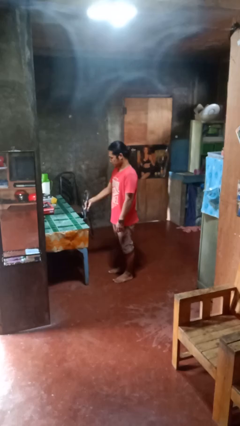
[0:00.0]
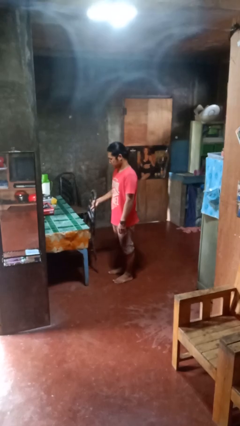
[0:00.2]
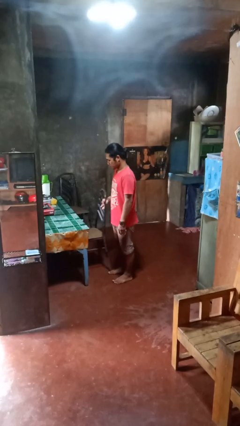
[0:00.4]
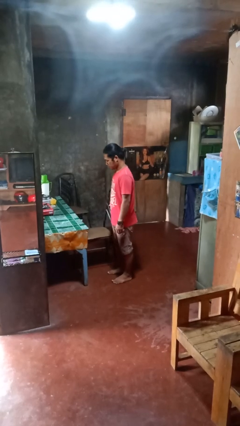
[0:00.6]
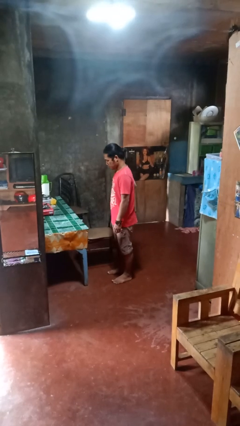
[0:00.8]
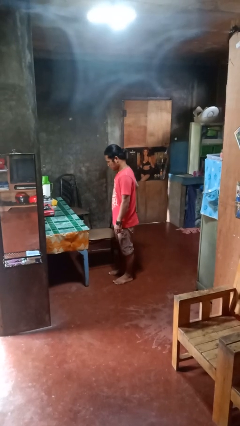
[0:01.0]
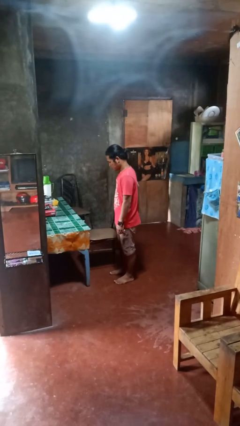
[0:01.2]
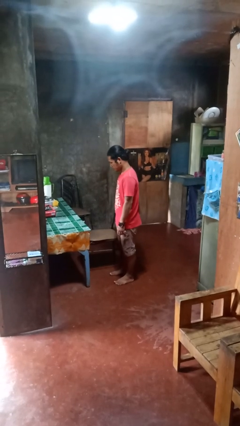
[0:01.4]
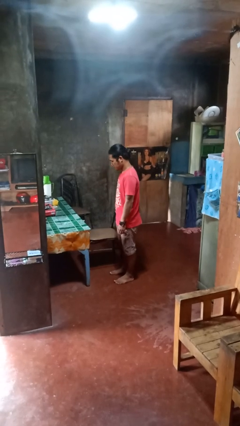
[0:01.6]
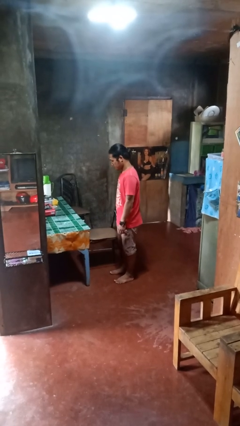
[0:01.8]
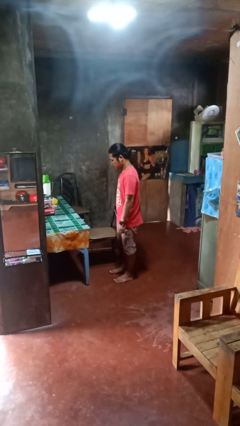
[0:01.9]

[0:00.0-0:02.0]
person pulls out chair
